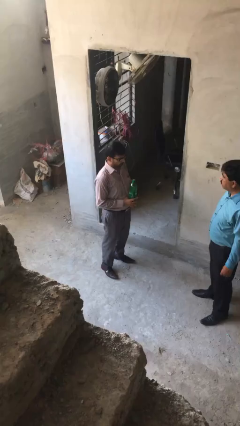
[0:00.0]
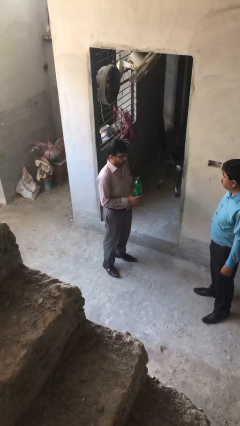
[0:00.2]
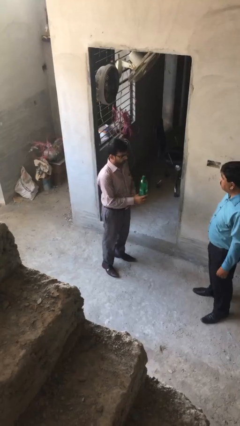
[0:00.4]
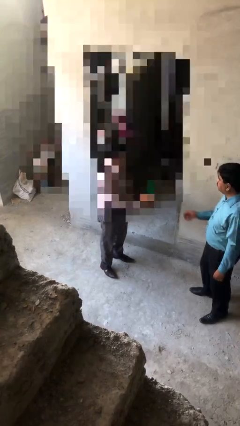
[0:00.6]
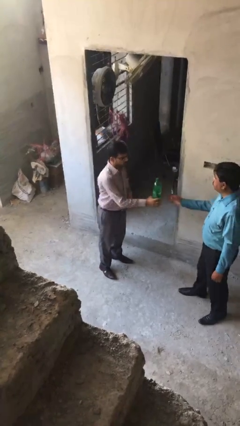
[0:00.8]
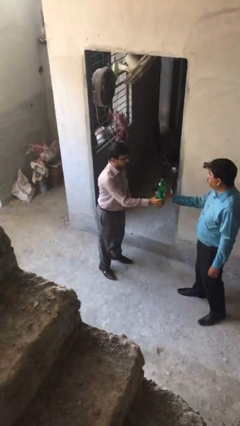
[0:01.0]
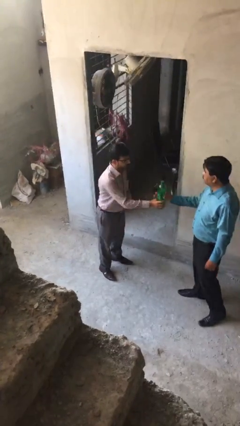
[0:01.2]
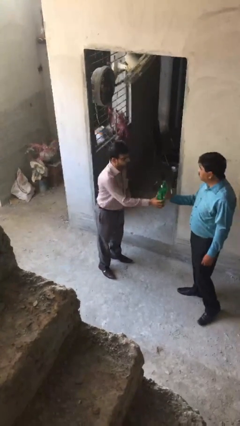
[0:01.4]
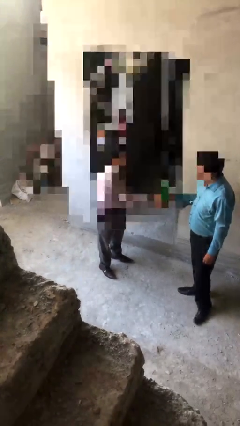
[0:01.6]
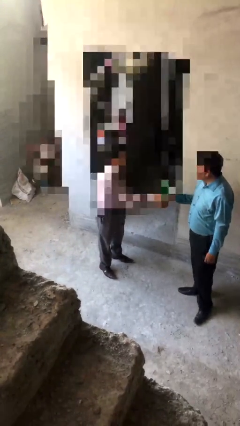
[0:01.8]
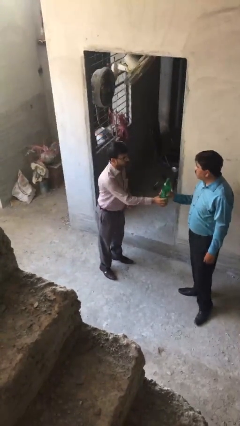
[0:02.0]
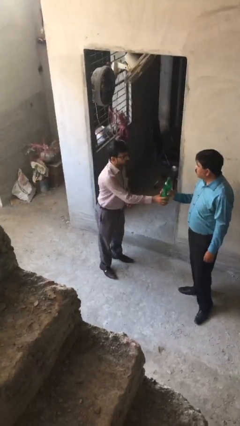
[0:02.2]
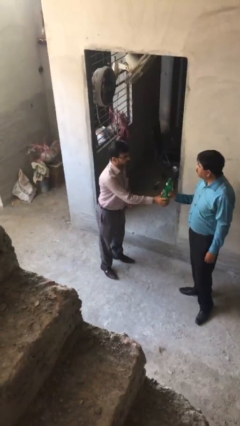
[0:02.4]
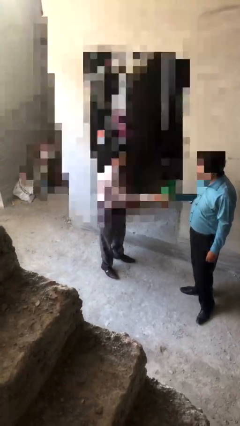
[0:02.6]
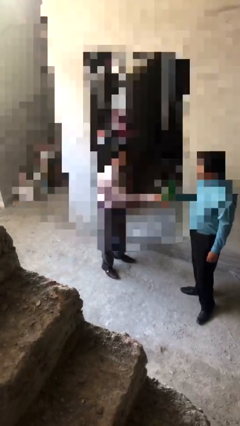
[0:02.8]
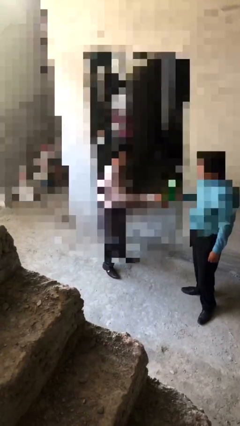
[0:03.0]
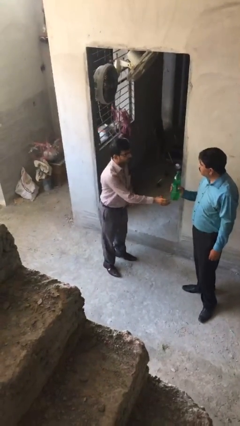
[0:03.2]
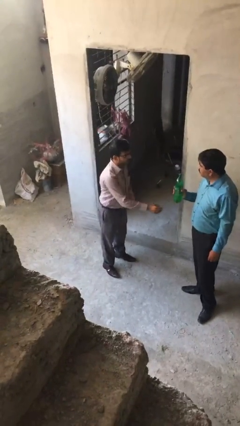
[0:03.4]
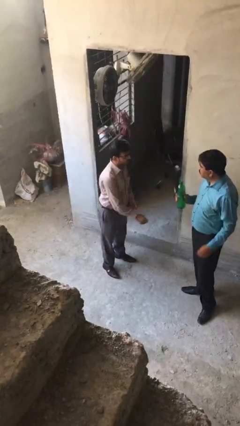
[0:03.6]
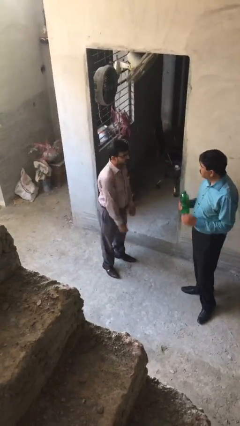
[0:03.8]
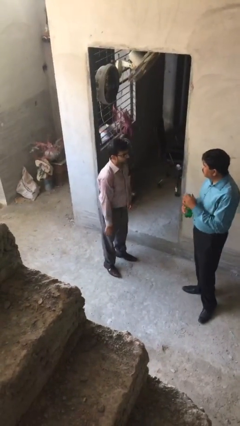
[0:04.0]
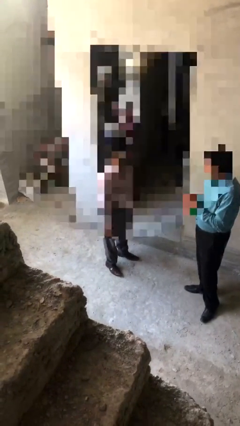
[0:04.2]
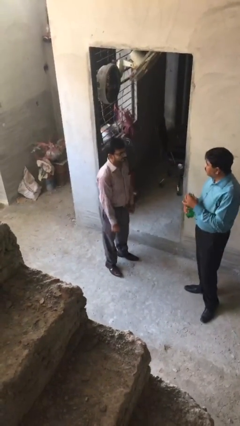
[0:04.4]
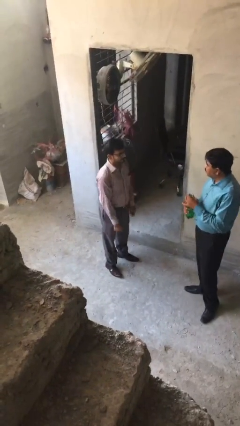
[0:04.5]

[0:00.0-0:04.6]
person transfers object to person

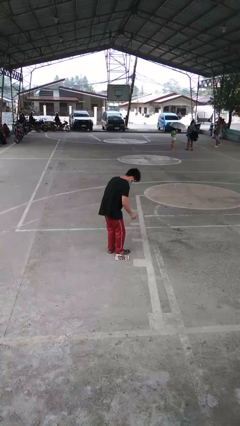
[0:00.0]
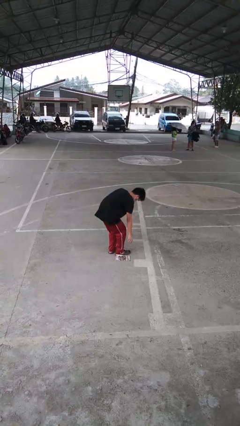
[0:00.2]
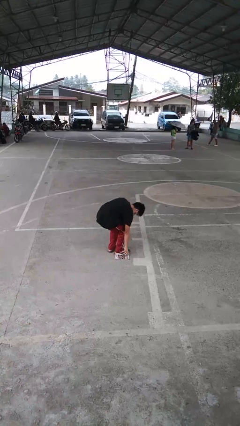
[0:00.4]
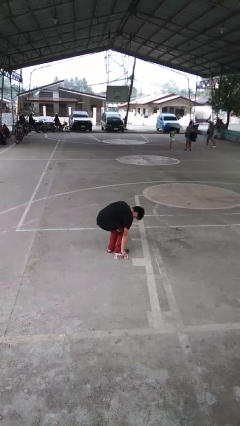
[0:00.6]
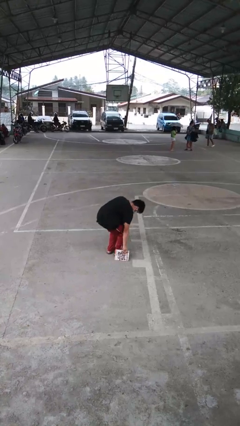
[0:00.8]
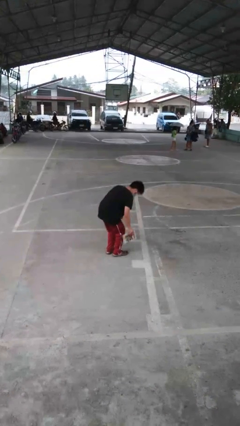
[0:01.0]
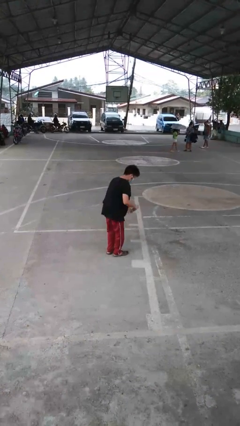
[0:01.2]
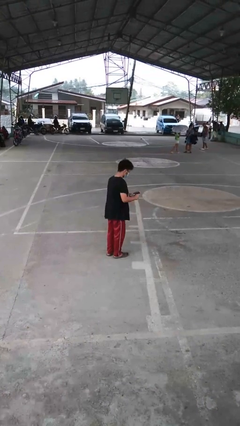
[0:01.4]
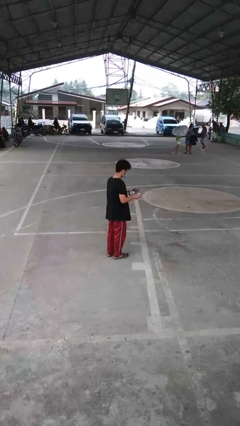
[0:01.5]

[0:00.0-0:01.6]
person picks up object from floor

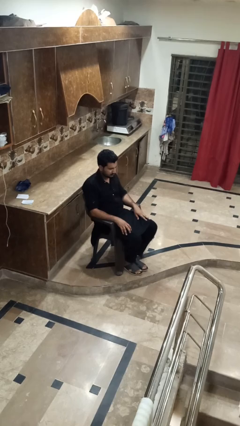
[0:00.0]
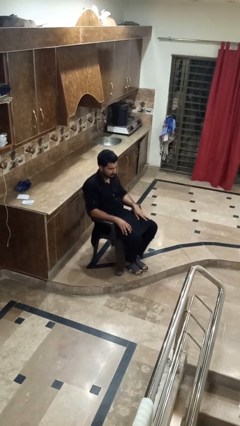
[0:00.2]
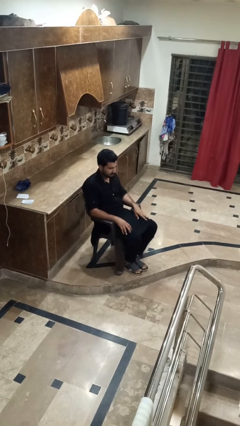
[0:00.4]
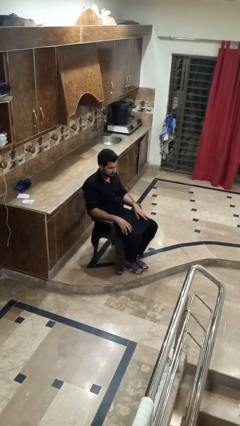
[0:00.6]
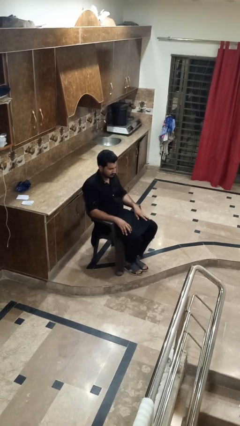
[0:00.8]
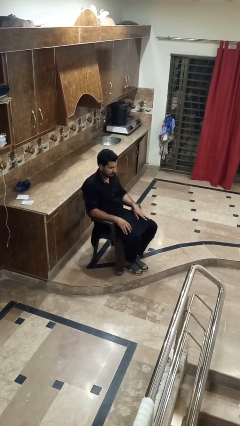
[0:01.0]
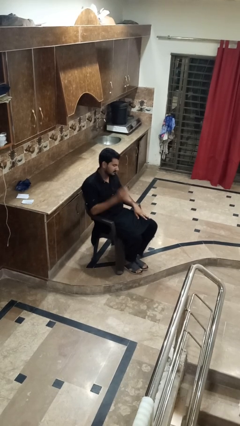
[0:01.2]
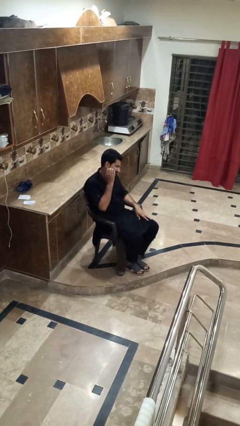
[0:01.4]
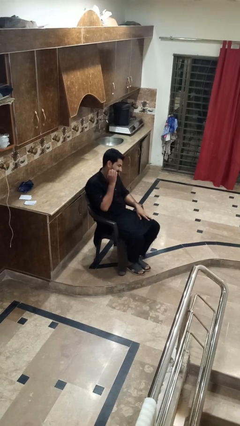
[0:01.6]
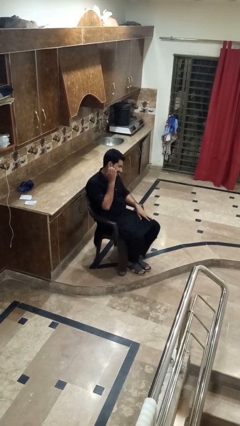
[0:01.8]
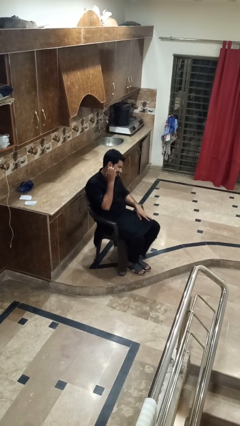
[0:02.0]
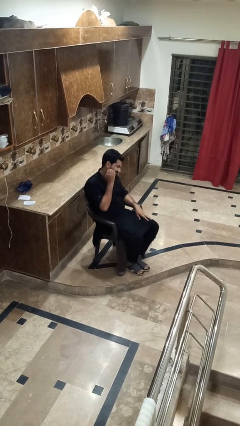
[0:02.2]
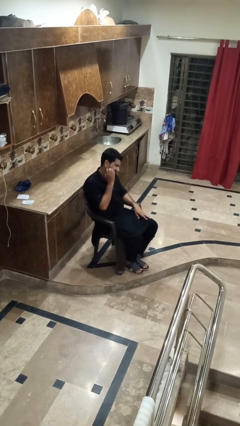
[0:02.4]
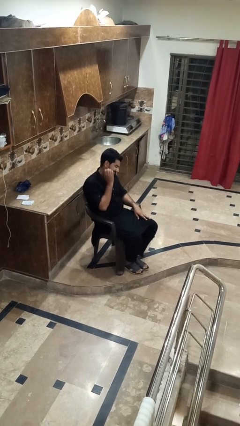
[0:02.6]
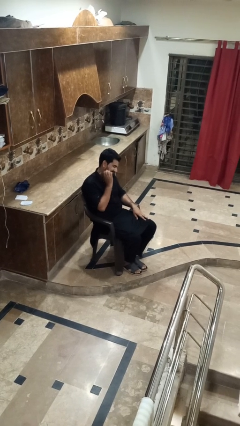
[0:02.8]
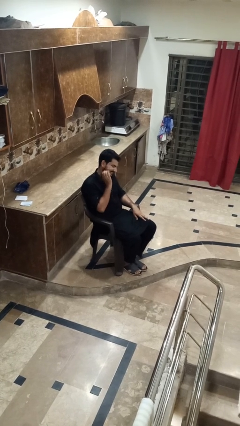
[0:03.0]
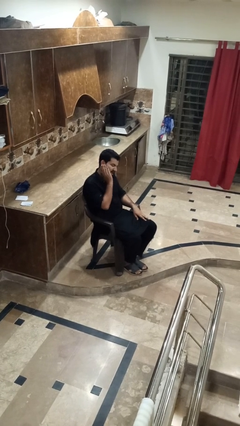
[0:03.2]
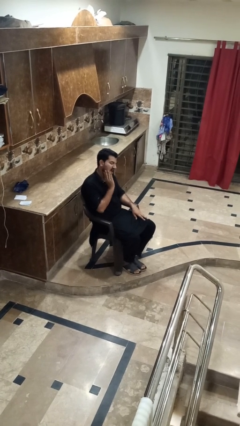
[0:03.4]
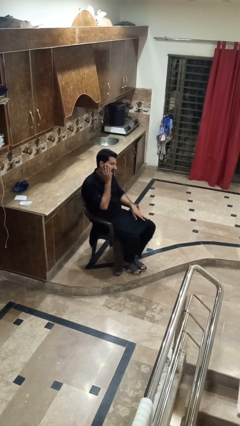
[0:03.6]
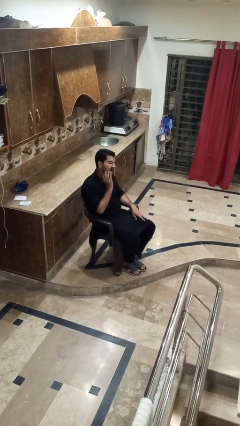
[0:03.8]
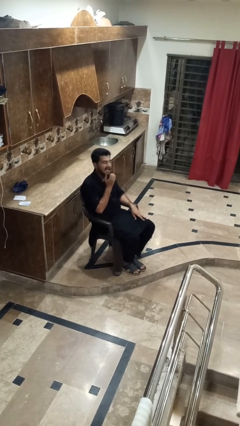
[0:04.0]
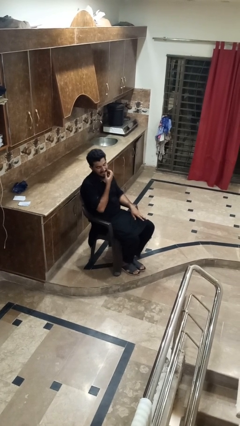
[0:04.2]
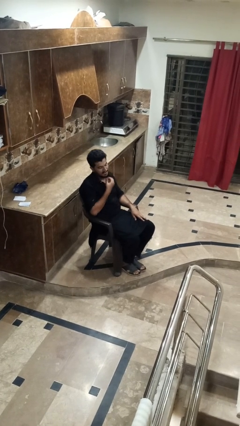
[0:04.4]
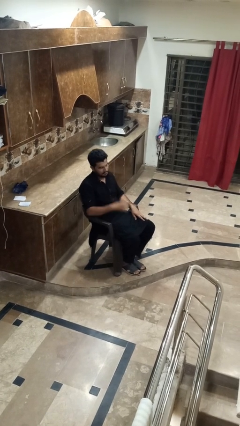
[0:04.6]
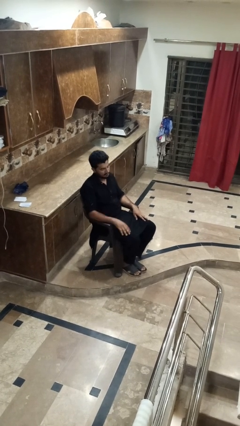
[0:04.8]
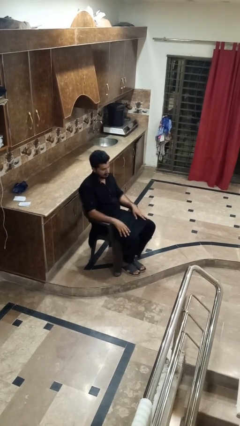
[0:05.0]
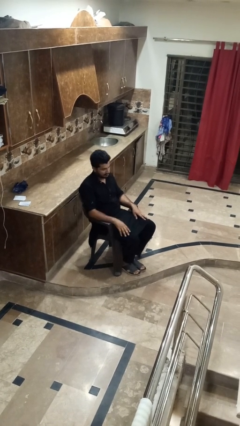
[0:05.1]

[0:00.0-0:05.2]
person scratches face

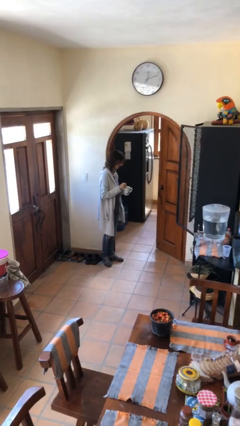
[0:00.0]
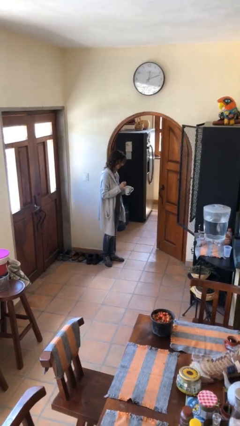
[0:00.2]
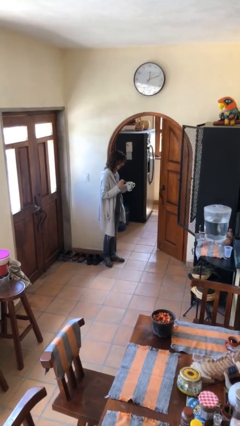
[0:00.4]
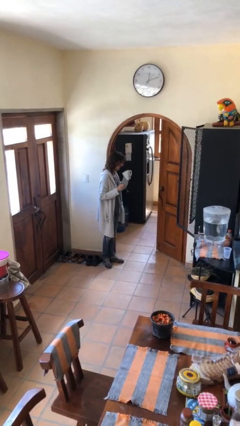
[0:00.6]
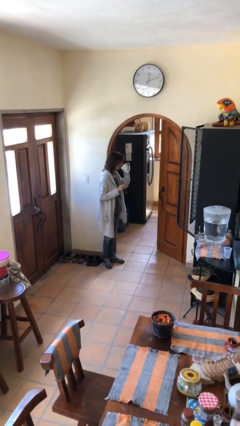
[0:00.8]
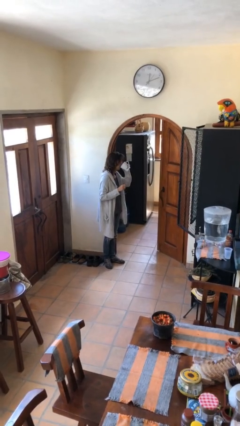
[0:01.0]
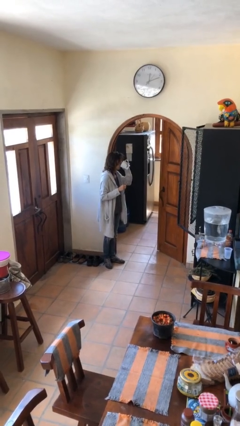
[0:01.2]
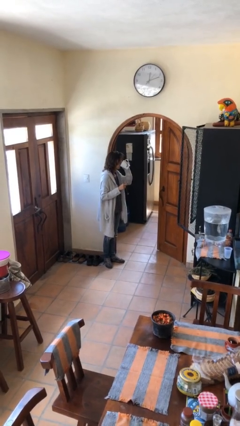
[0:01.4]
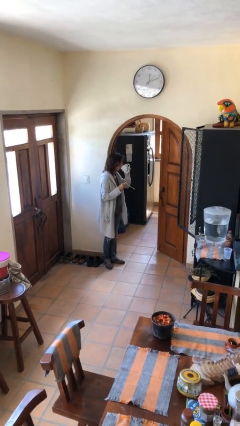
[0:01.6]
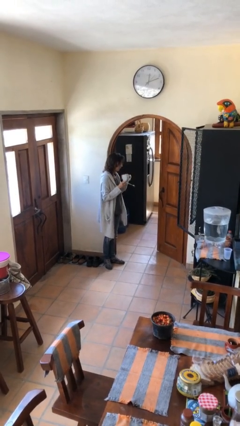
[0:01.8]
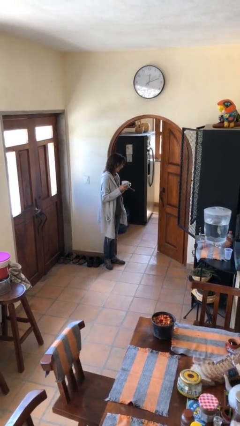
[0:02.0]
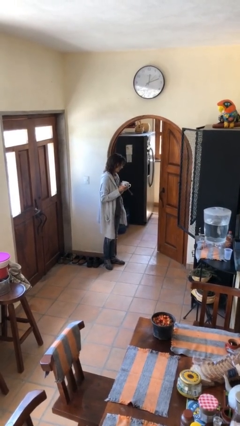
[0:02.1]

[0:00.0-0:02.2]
person drinks from mug

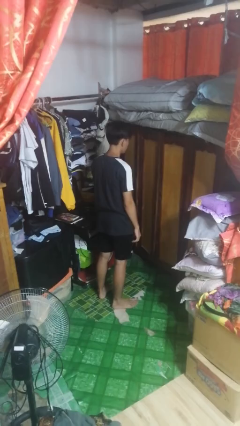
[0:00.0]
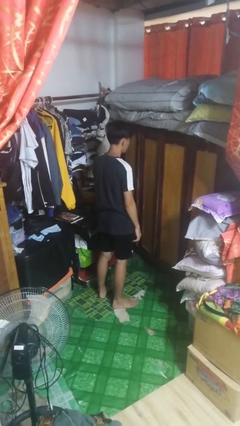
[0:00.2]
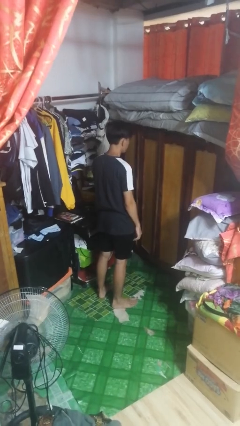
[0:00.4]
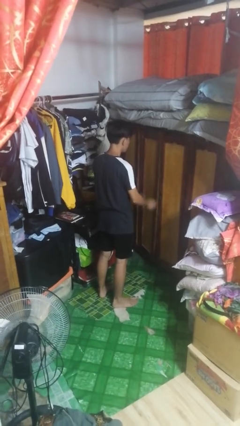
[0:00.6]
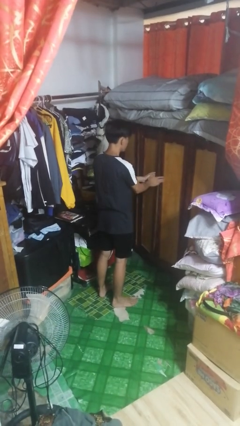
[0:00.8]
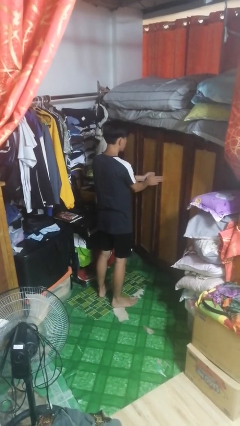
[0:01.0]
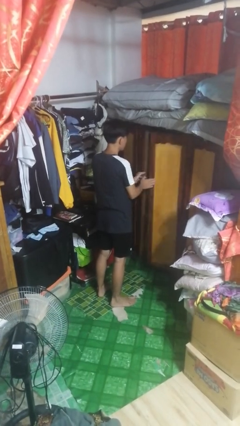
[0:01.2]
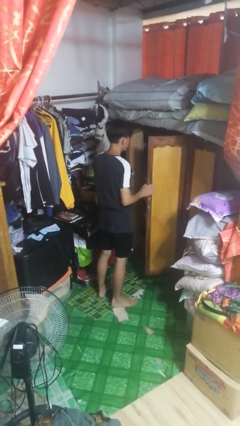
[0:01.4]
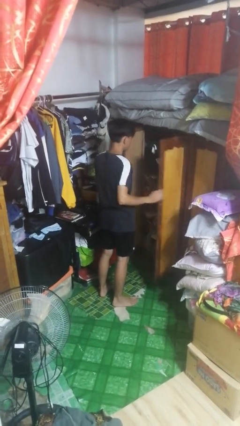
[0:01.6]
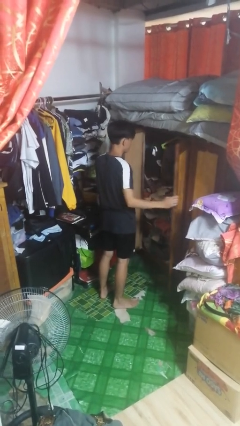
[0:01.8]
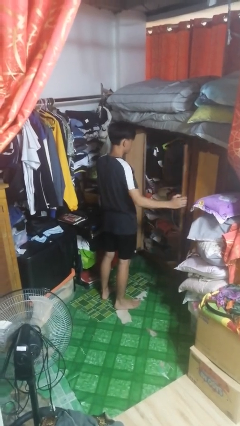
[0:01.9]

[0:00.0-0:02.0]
person opens dresser drawer

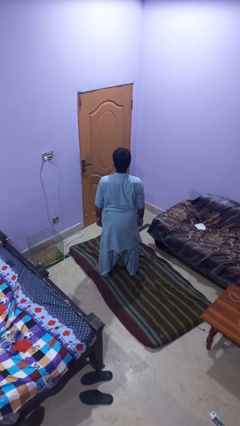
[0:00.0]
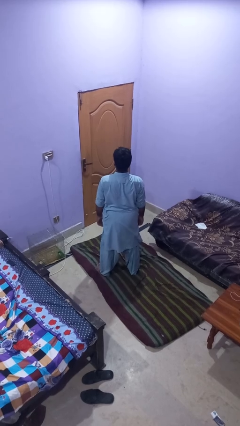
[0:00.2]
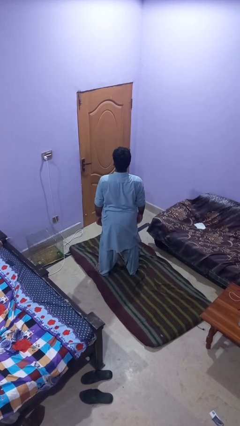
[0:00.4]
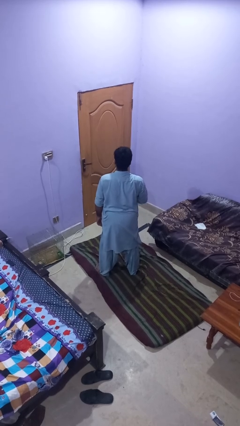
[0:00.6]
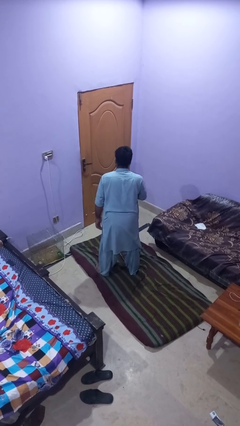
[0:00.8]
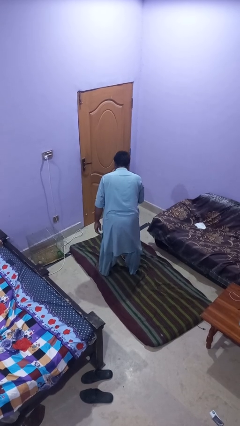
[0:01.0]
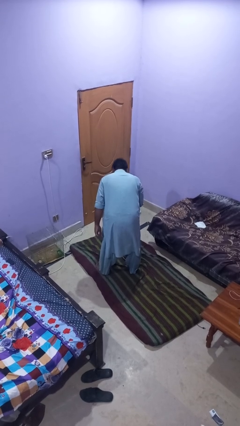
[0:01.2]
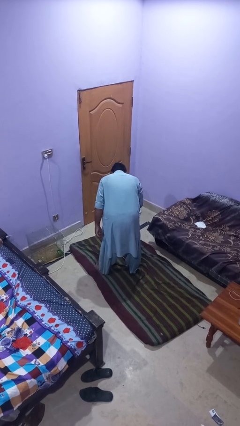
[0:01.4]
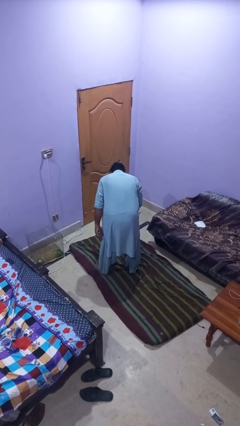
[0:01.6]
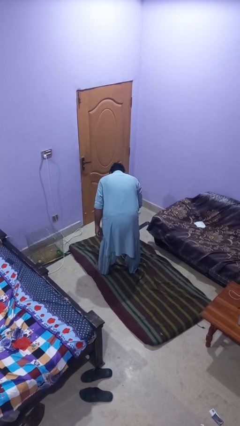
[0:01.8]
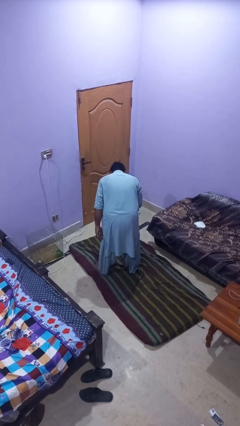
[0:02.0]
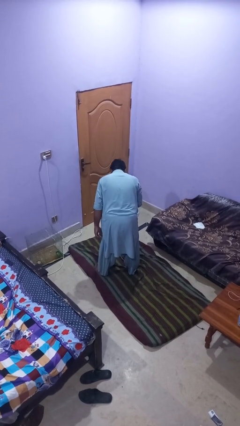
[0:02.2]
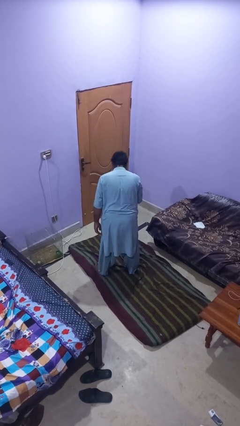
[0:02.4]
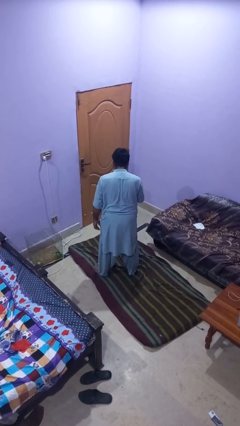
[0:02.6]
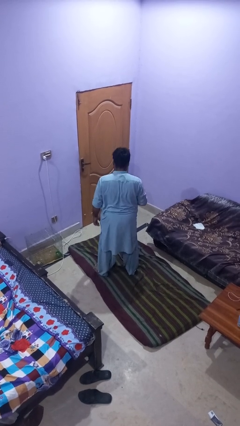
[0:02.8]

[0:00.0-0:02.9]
person bows
